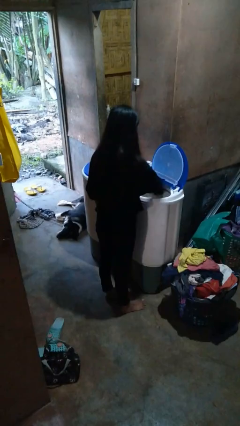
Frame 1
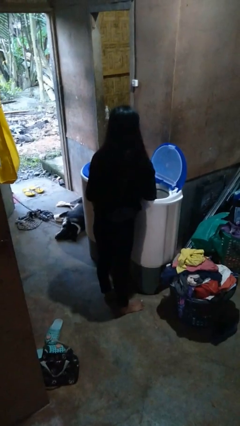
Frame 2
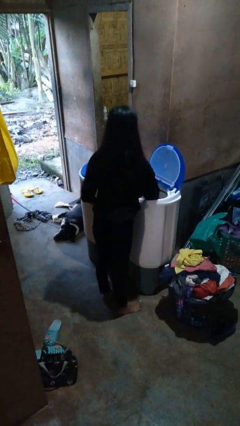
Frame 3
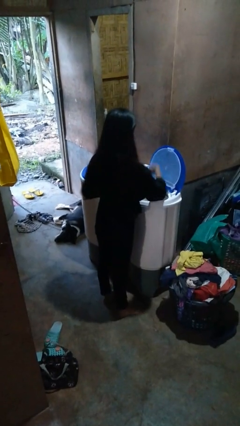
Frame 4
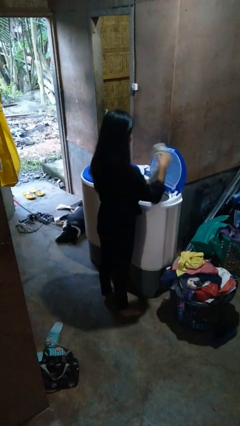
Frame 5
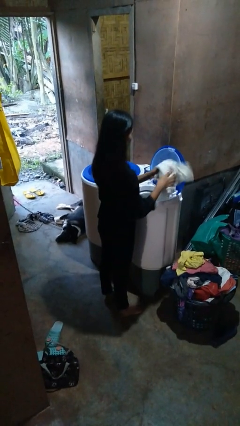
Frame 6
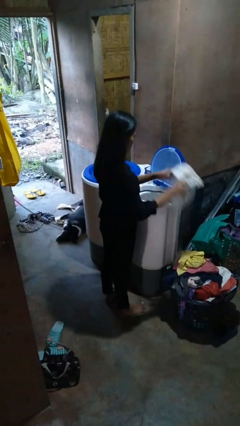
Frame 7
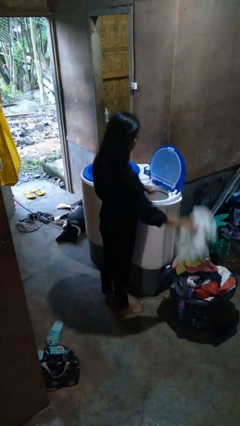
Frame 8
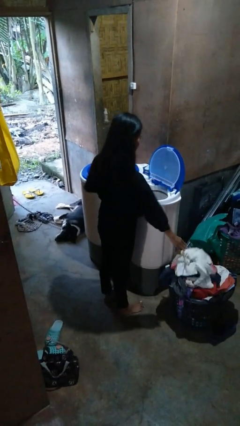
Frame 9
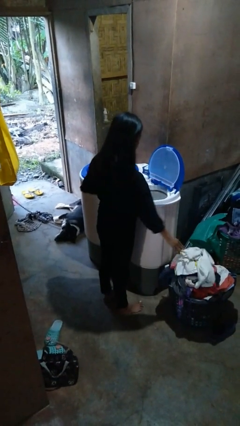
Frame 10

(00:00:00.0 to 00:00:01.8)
person unloads dryer

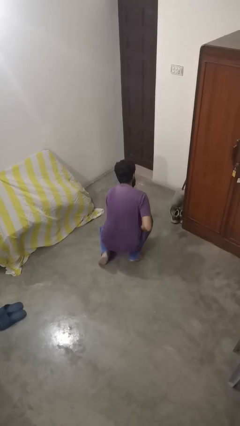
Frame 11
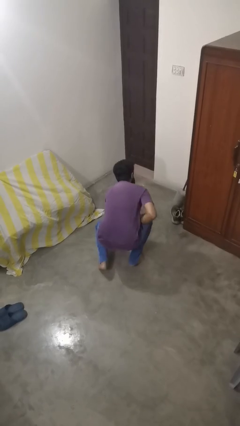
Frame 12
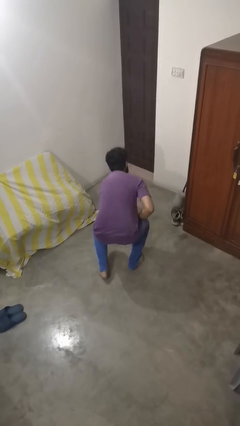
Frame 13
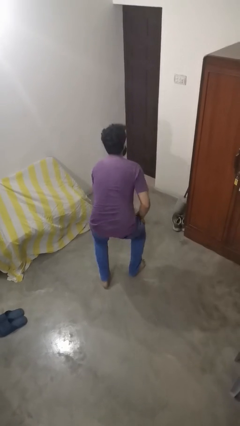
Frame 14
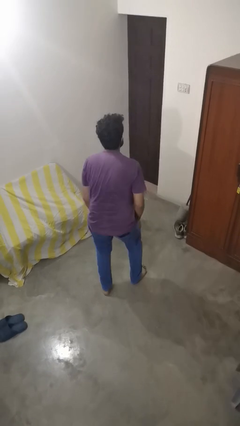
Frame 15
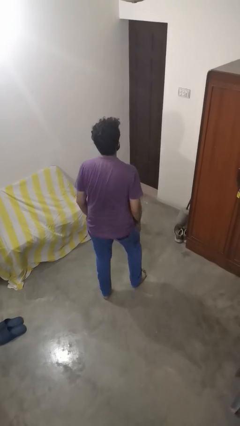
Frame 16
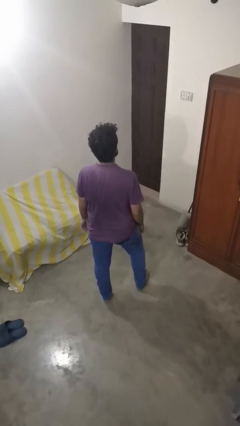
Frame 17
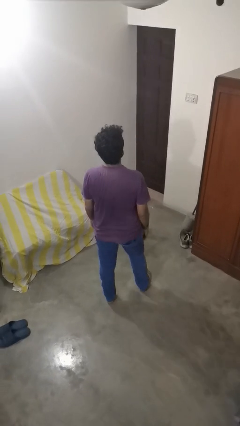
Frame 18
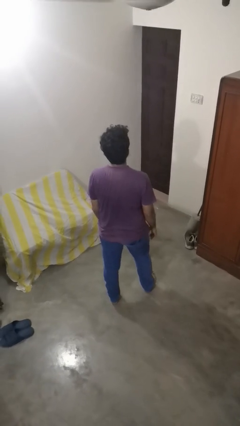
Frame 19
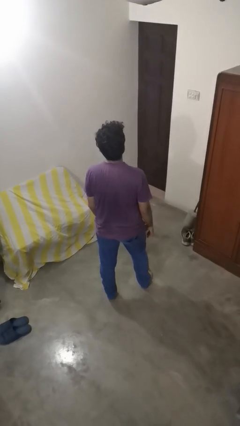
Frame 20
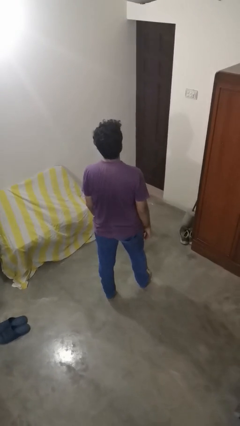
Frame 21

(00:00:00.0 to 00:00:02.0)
person stands up from floor

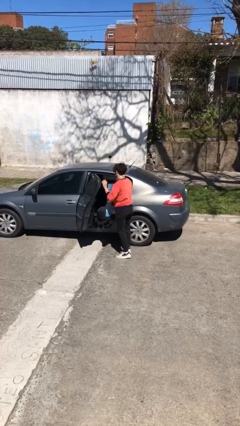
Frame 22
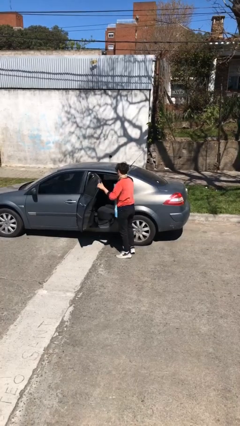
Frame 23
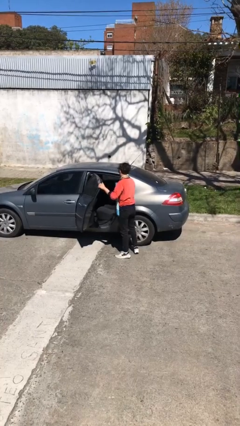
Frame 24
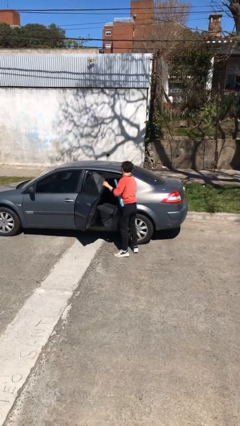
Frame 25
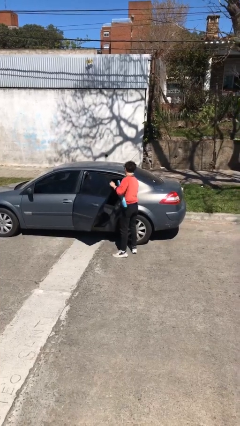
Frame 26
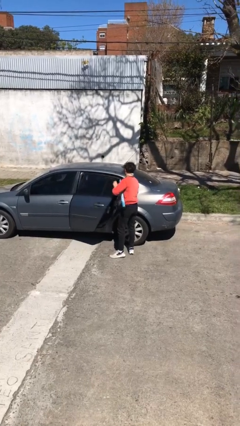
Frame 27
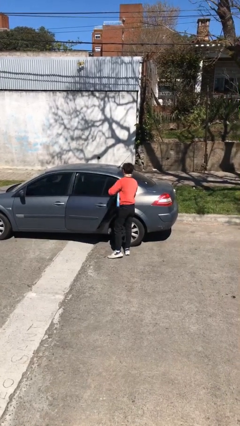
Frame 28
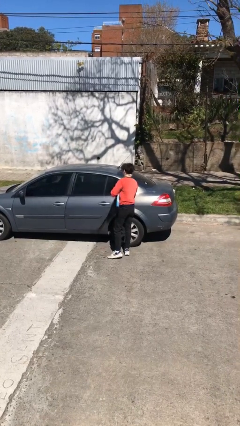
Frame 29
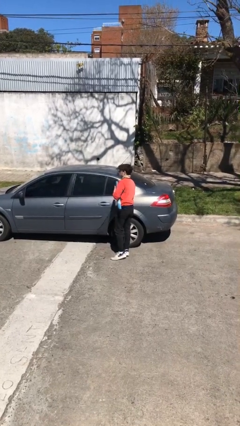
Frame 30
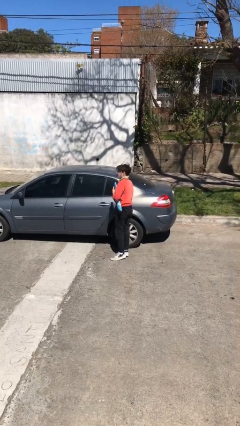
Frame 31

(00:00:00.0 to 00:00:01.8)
person closes car door

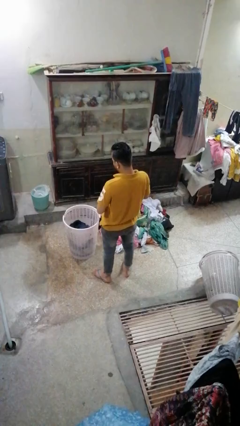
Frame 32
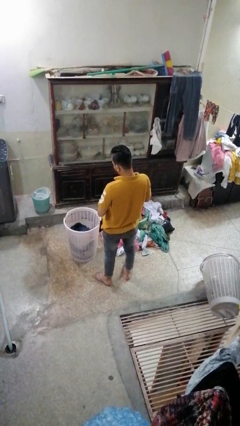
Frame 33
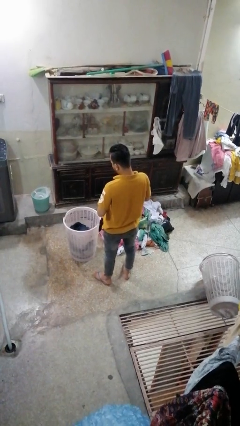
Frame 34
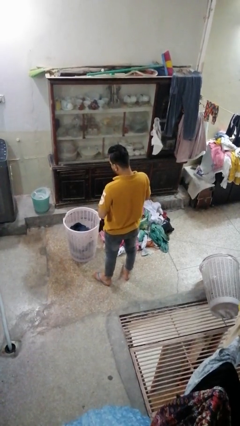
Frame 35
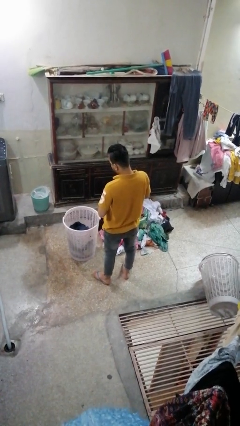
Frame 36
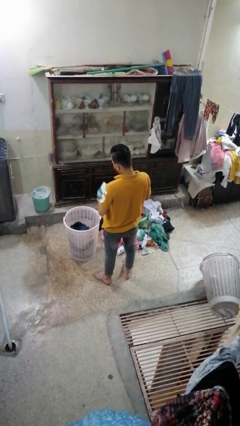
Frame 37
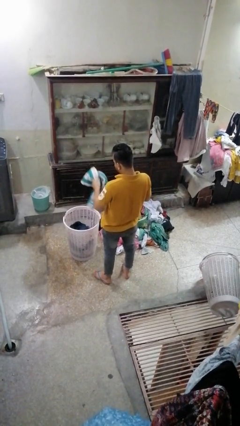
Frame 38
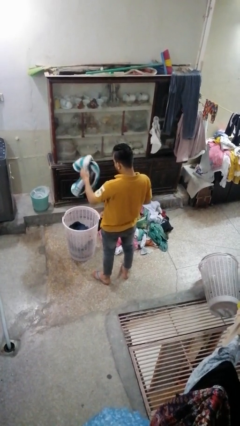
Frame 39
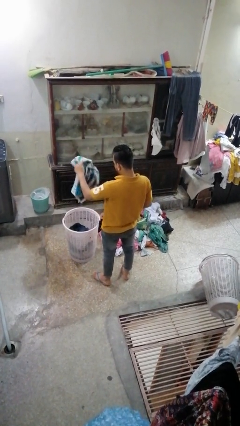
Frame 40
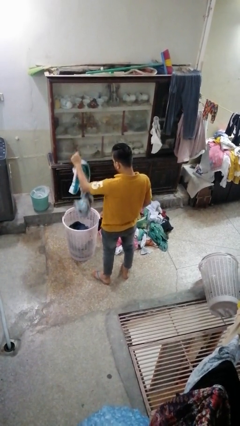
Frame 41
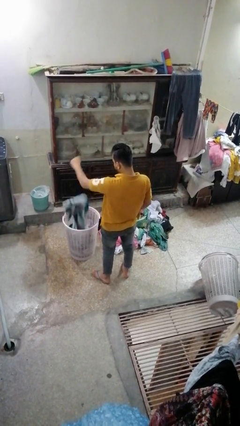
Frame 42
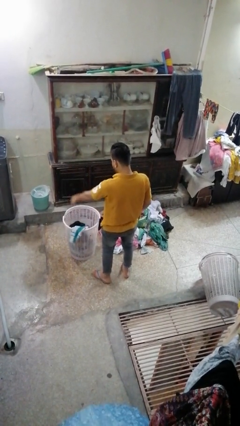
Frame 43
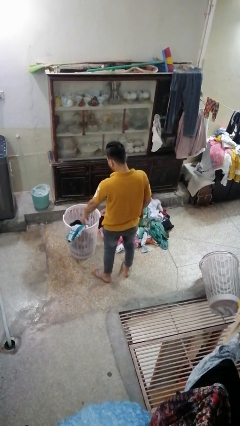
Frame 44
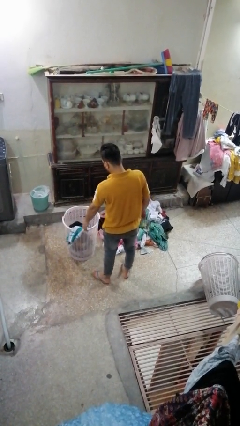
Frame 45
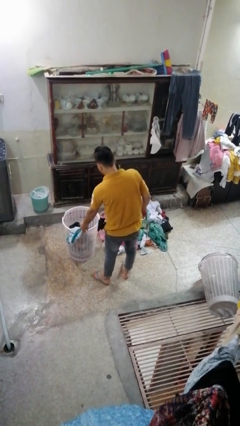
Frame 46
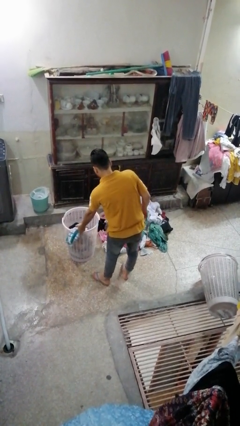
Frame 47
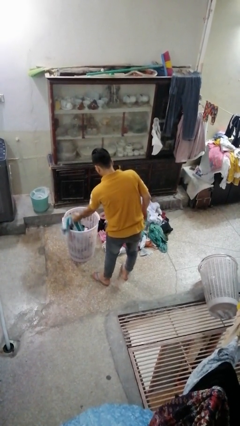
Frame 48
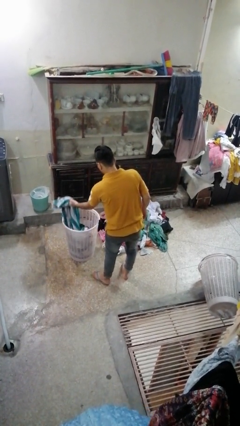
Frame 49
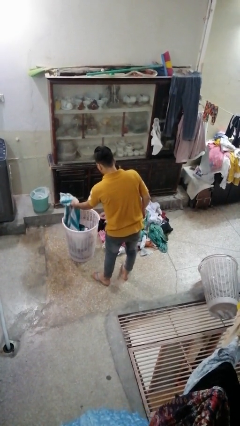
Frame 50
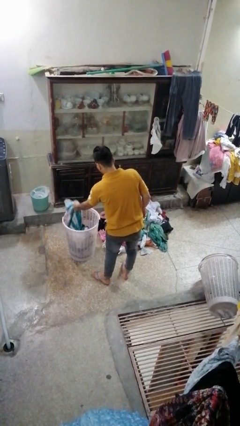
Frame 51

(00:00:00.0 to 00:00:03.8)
person puts object into basket

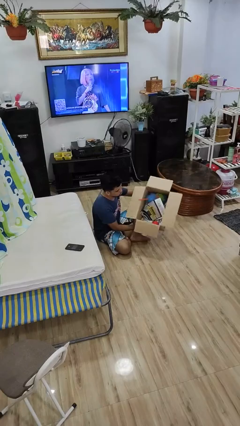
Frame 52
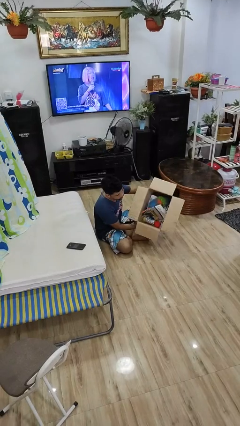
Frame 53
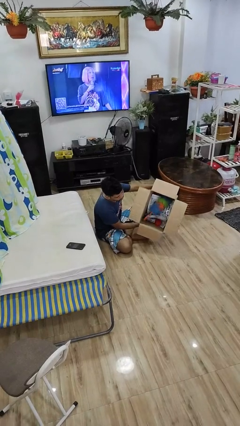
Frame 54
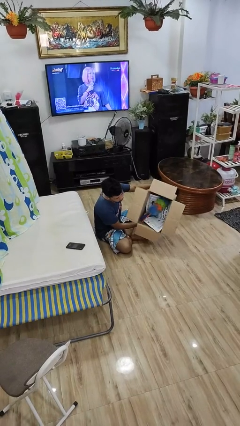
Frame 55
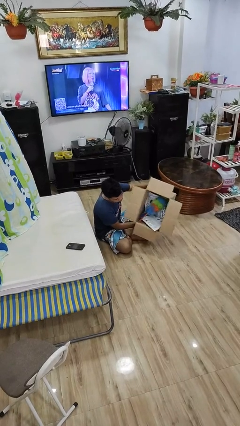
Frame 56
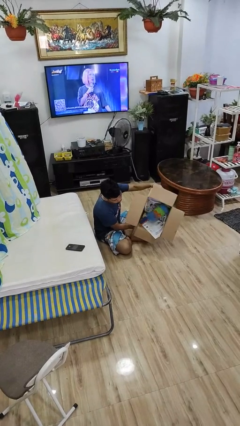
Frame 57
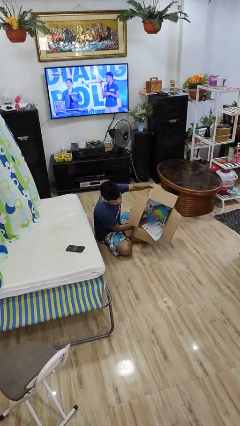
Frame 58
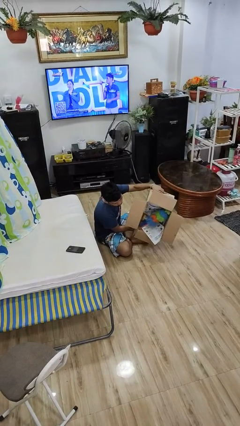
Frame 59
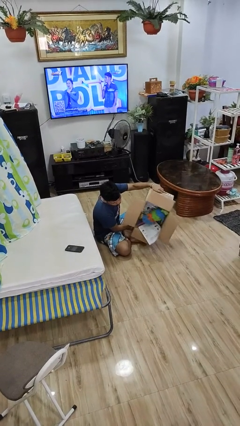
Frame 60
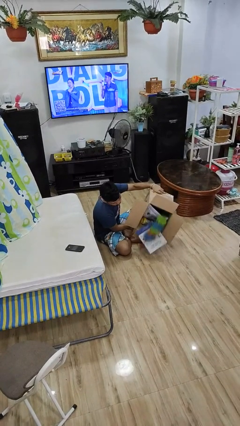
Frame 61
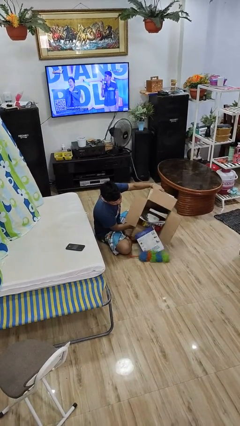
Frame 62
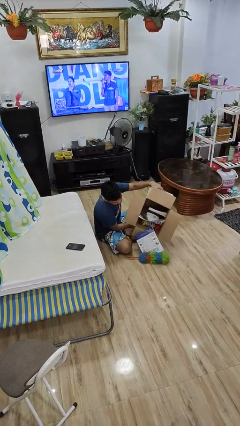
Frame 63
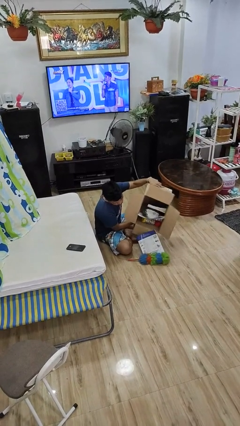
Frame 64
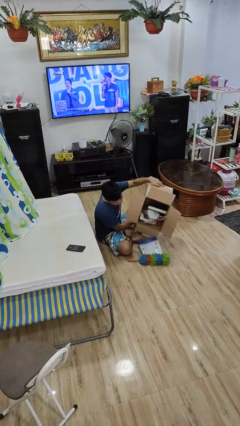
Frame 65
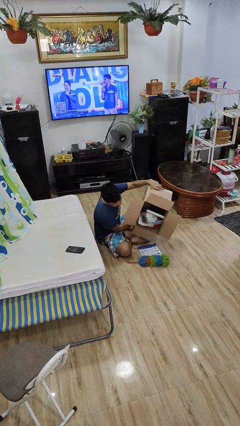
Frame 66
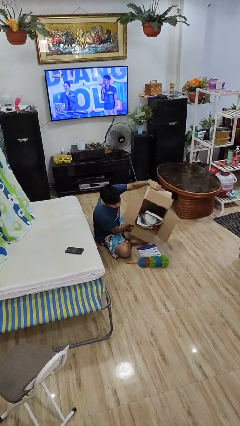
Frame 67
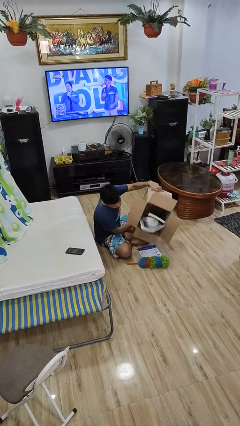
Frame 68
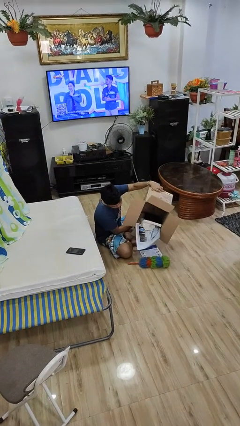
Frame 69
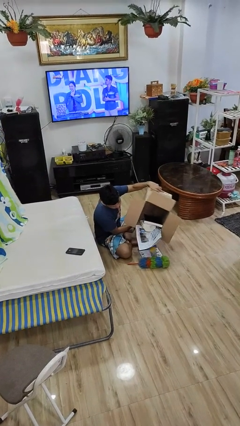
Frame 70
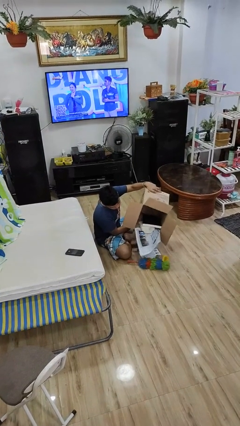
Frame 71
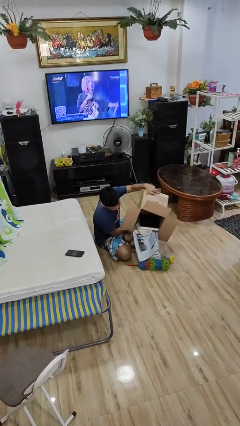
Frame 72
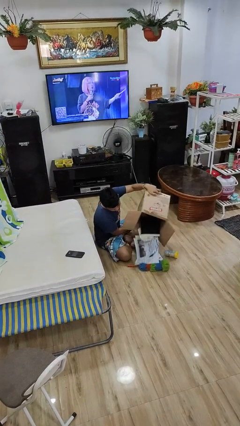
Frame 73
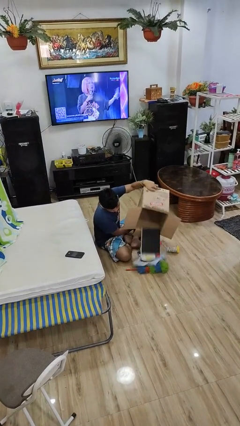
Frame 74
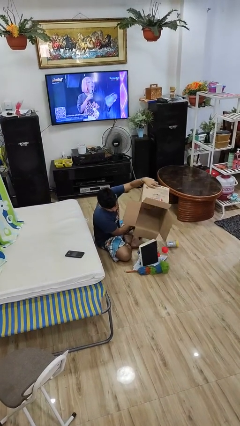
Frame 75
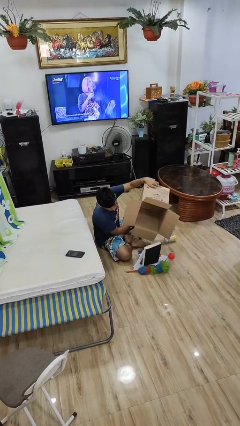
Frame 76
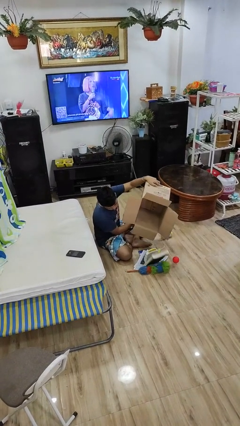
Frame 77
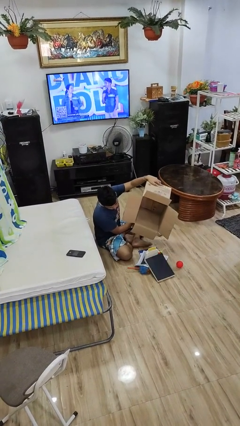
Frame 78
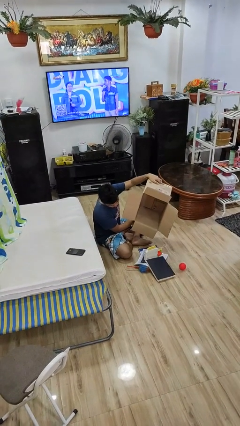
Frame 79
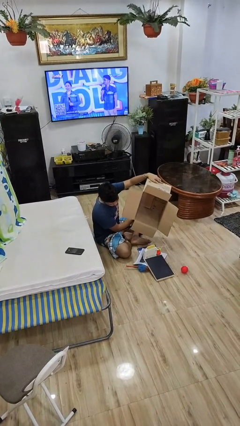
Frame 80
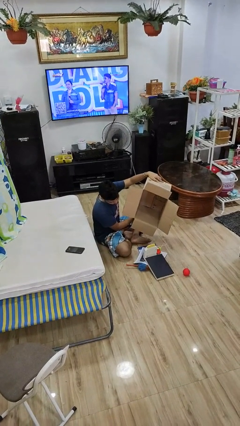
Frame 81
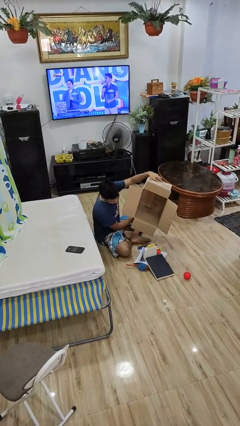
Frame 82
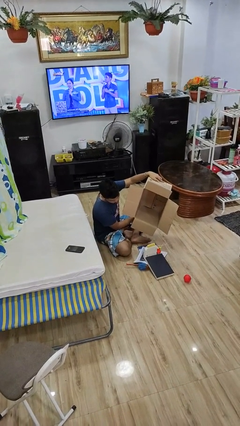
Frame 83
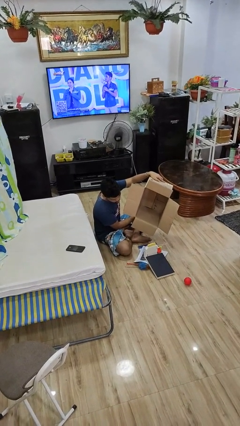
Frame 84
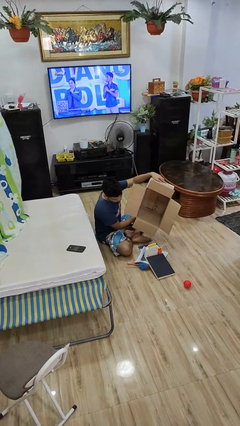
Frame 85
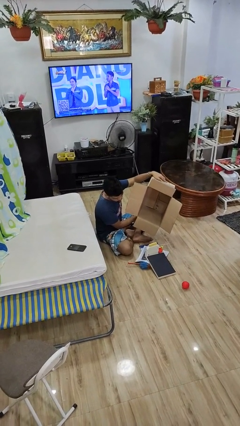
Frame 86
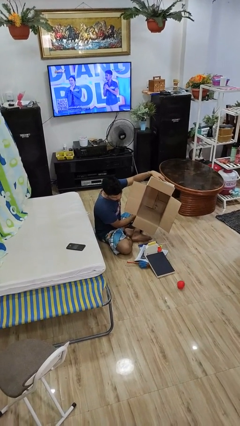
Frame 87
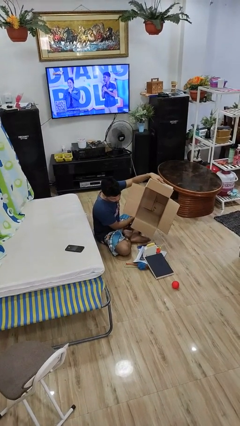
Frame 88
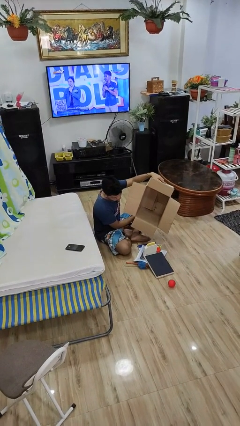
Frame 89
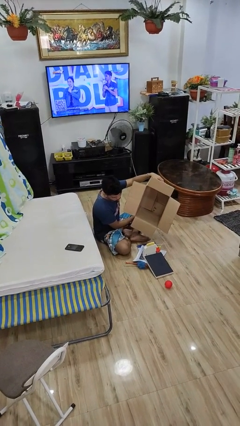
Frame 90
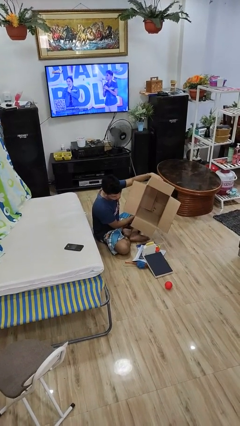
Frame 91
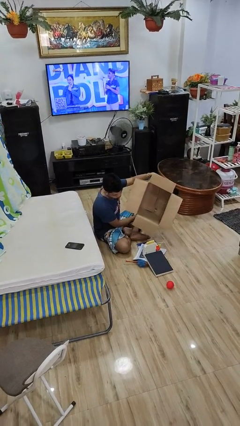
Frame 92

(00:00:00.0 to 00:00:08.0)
person unloads box onto floor
